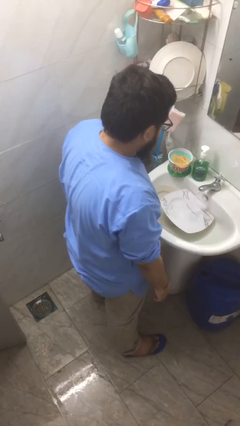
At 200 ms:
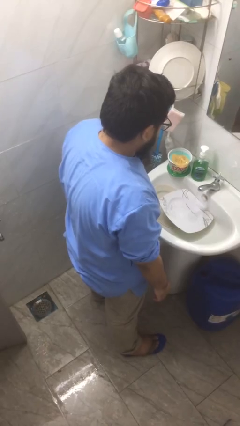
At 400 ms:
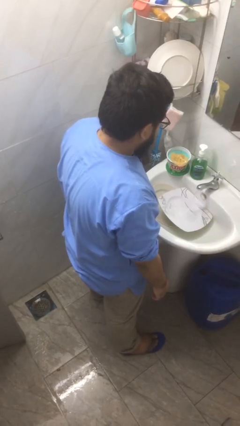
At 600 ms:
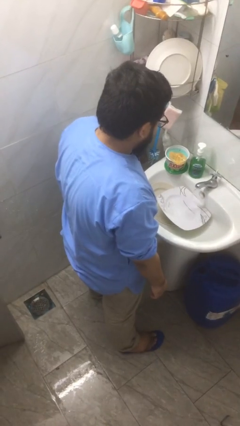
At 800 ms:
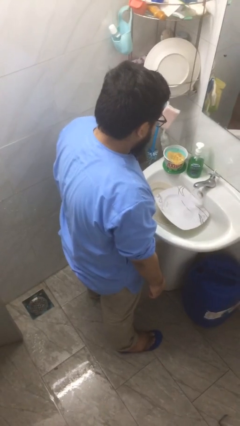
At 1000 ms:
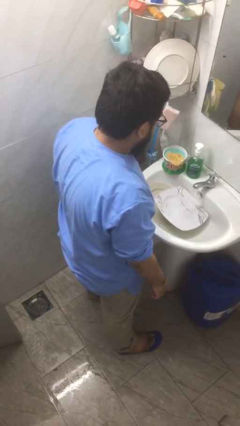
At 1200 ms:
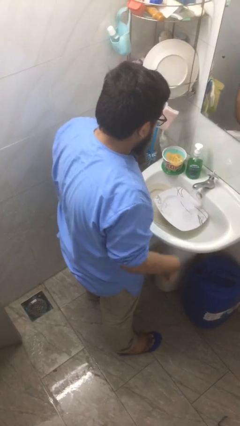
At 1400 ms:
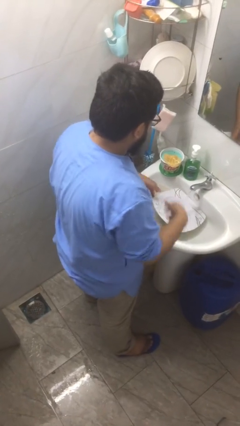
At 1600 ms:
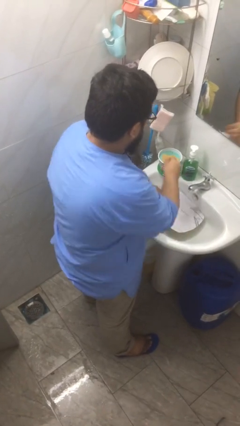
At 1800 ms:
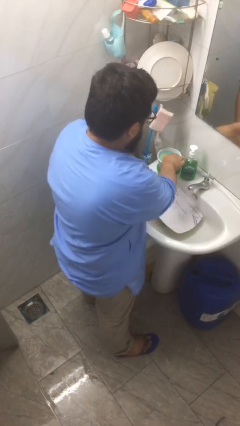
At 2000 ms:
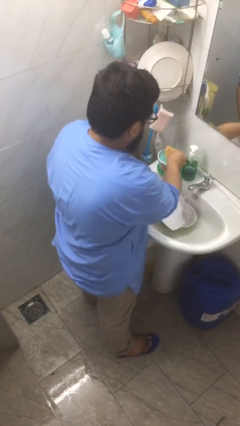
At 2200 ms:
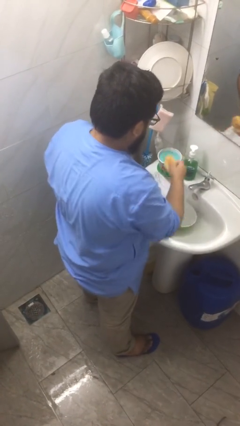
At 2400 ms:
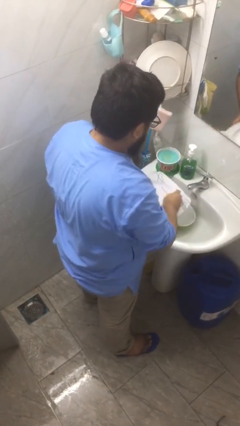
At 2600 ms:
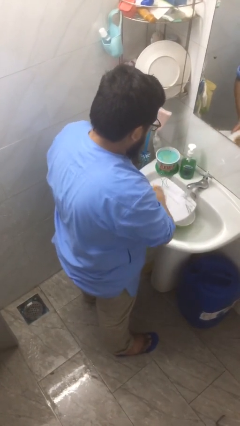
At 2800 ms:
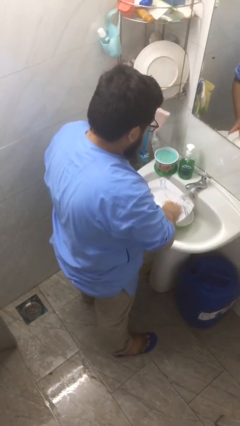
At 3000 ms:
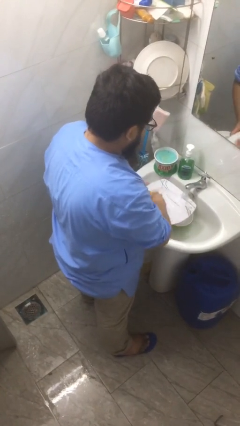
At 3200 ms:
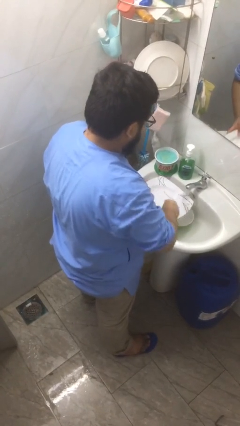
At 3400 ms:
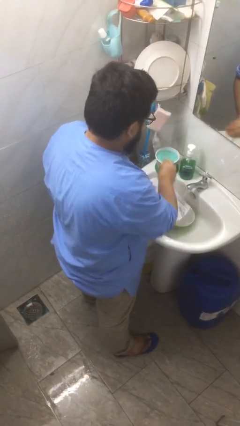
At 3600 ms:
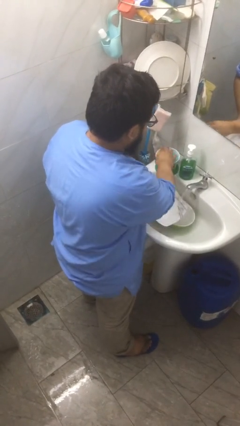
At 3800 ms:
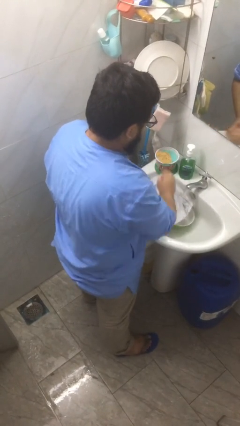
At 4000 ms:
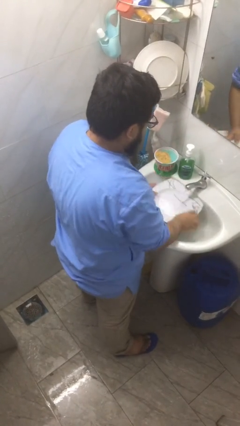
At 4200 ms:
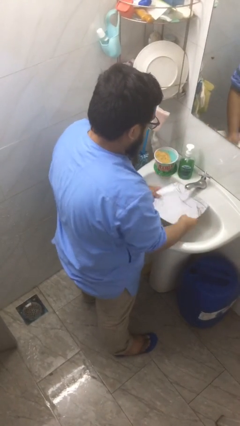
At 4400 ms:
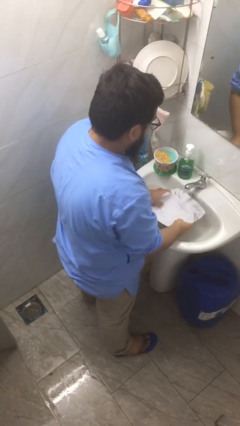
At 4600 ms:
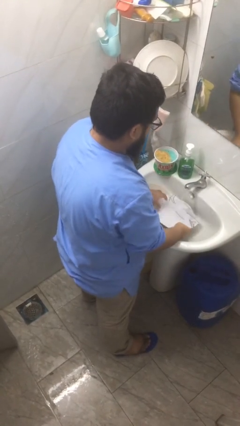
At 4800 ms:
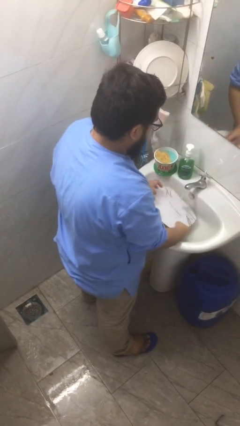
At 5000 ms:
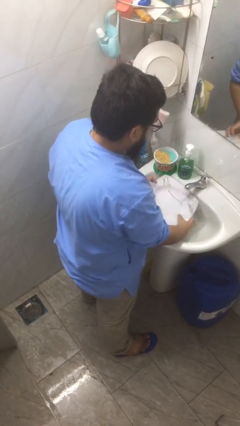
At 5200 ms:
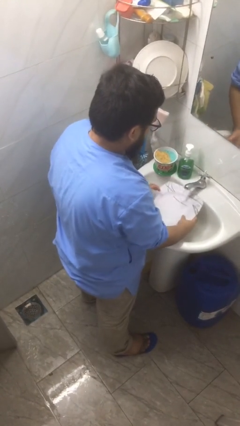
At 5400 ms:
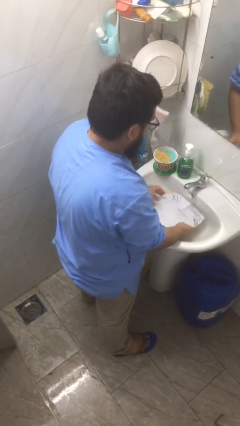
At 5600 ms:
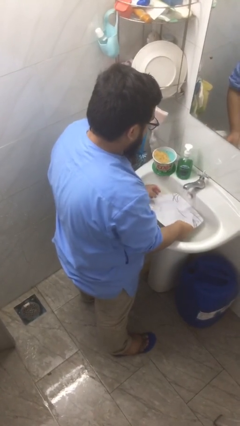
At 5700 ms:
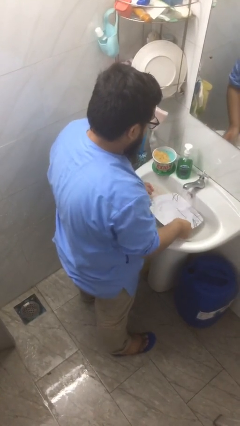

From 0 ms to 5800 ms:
person washes dish

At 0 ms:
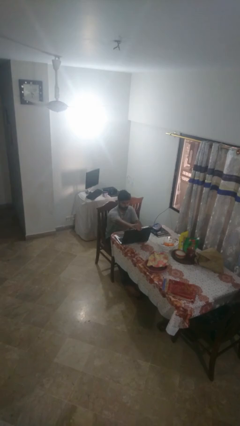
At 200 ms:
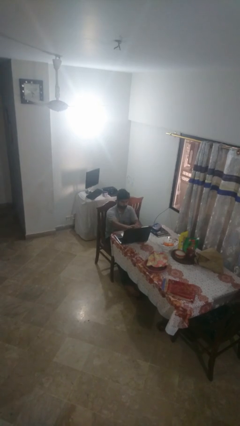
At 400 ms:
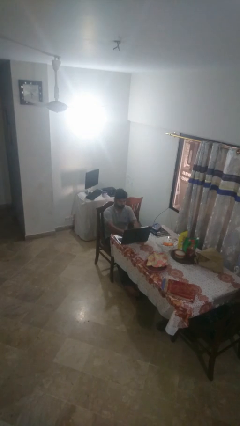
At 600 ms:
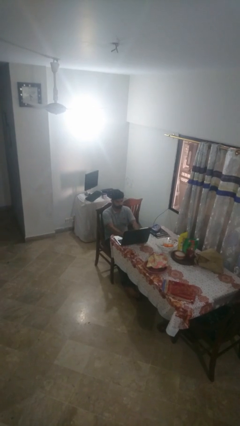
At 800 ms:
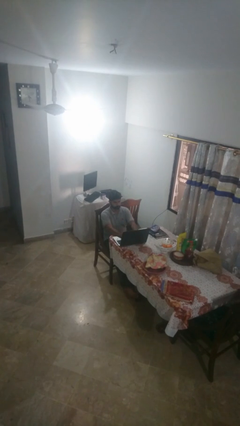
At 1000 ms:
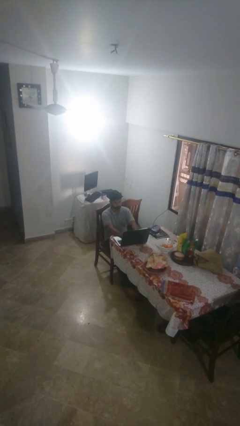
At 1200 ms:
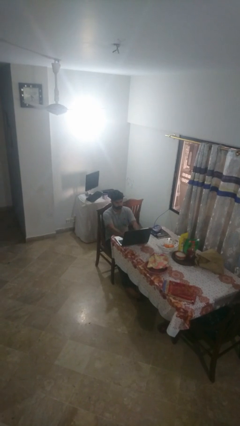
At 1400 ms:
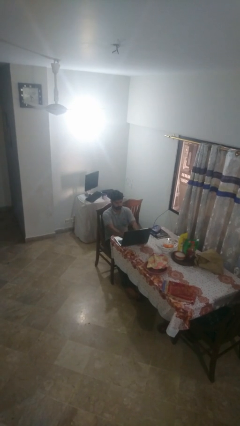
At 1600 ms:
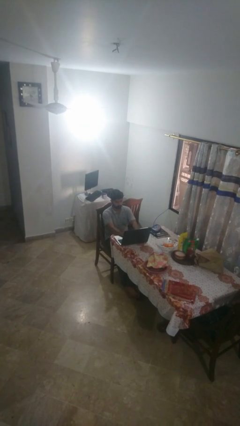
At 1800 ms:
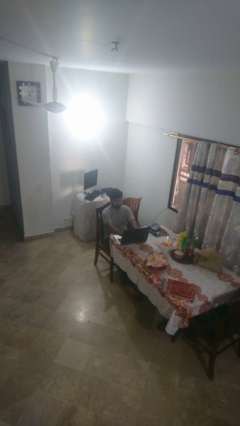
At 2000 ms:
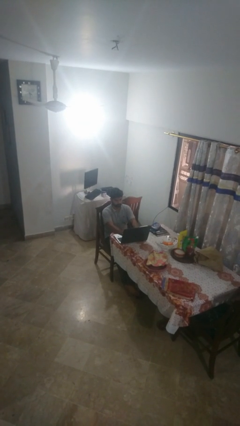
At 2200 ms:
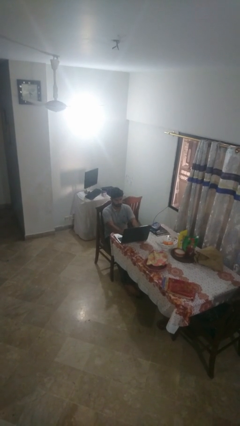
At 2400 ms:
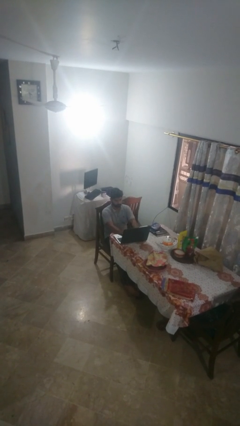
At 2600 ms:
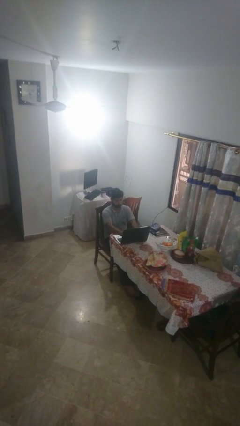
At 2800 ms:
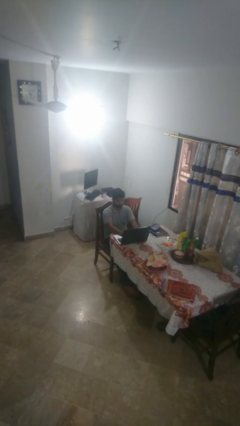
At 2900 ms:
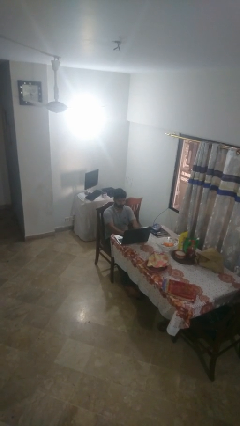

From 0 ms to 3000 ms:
person interacts with laptop

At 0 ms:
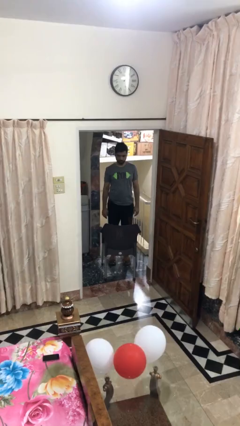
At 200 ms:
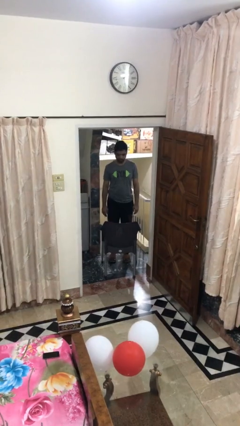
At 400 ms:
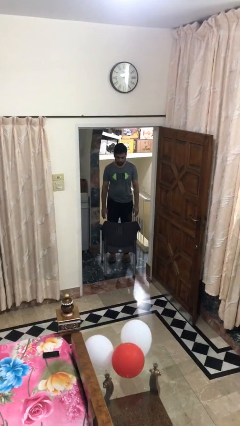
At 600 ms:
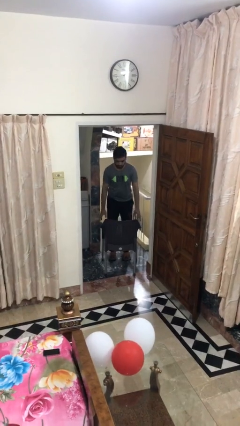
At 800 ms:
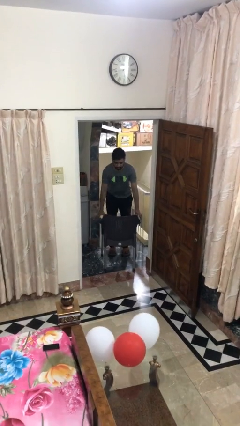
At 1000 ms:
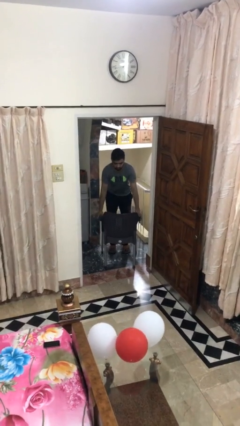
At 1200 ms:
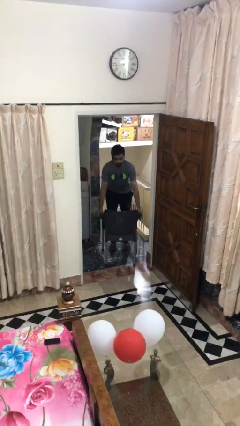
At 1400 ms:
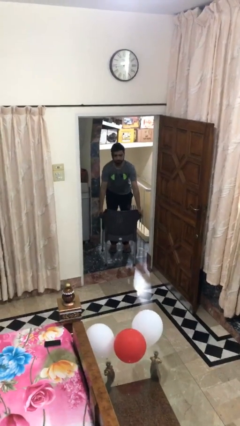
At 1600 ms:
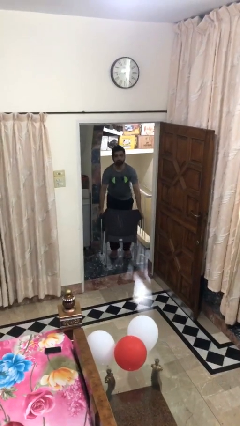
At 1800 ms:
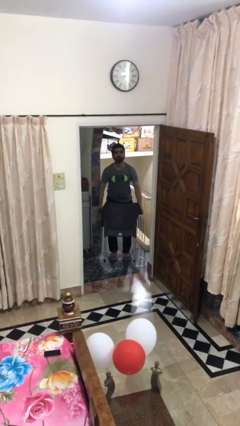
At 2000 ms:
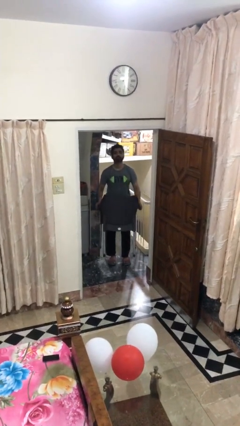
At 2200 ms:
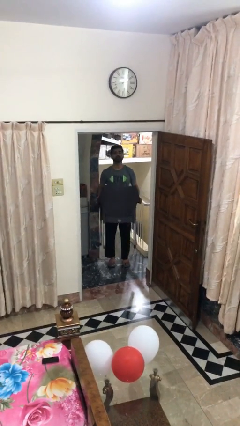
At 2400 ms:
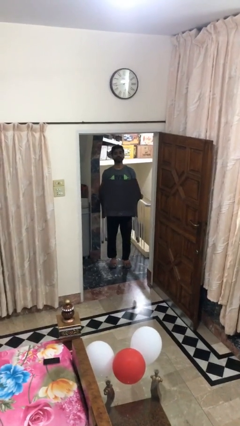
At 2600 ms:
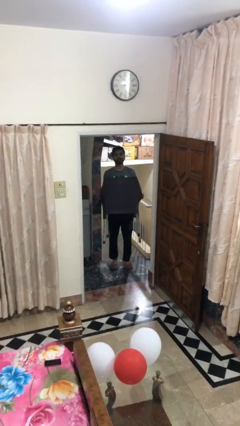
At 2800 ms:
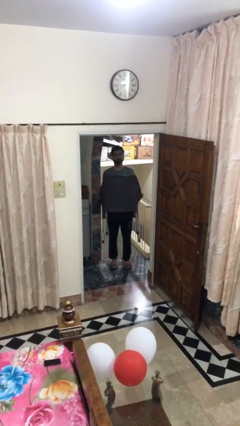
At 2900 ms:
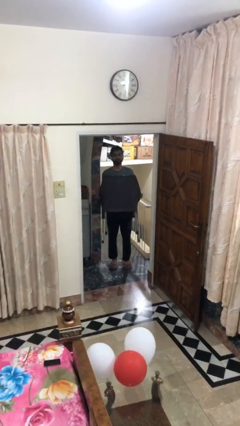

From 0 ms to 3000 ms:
person picks up object from floor

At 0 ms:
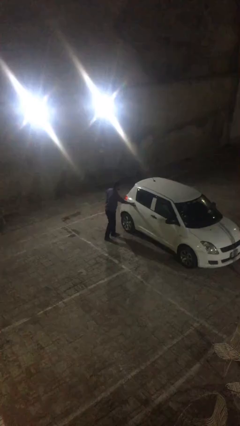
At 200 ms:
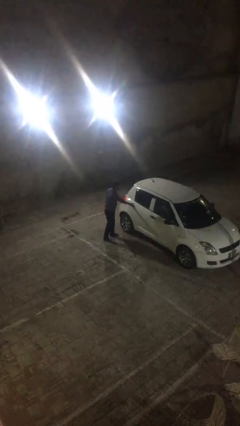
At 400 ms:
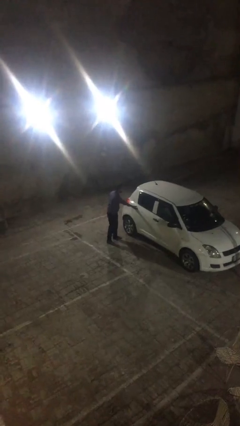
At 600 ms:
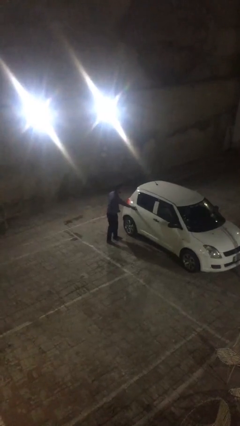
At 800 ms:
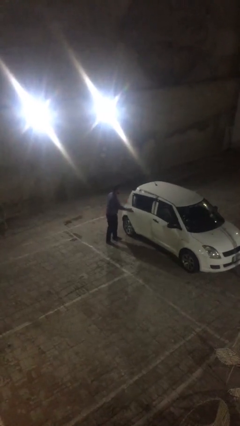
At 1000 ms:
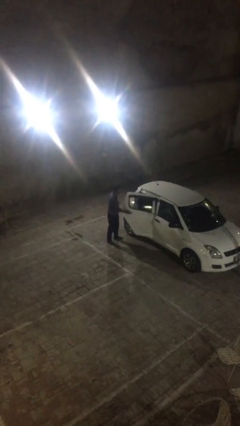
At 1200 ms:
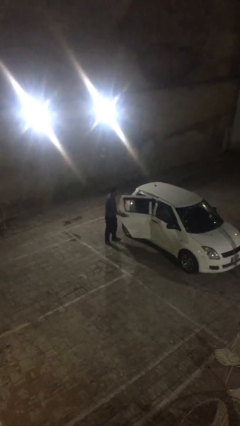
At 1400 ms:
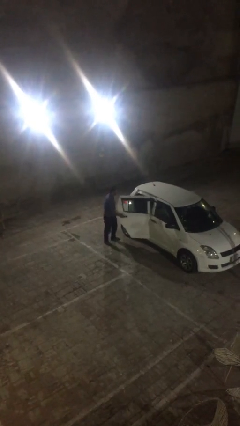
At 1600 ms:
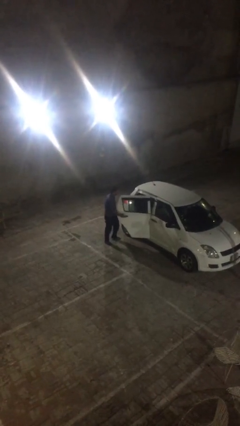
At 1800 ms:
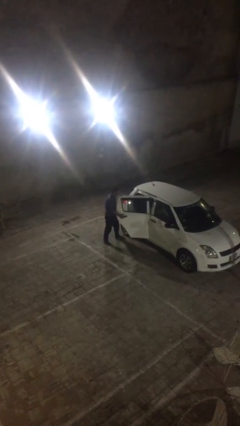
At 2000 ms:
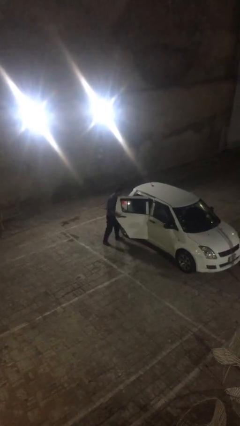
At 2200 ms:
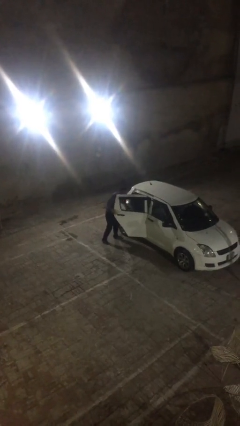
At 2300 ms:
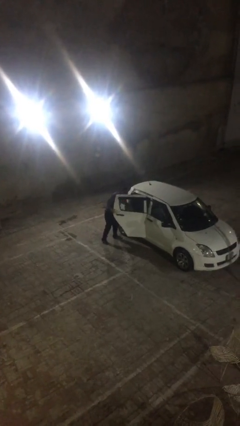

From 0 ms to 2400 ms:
person opens car door

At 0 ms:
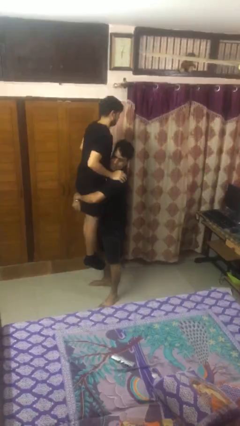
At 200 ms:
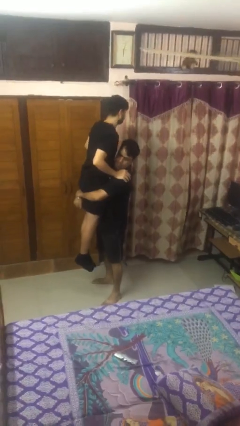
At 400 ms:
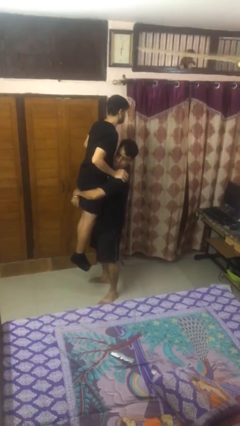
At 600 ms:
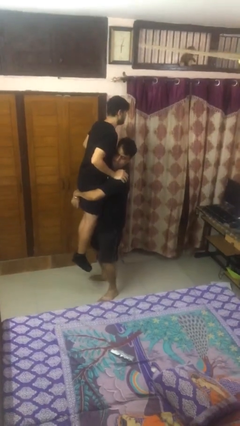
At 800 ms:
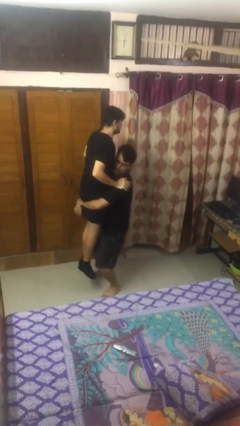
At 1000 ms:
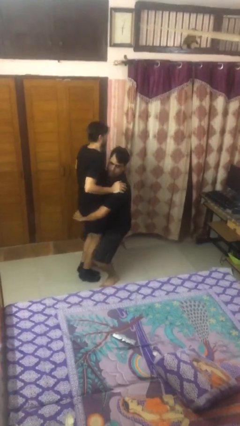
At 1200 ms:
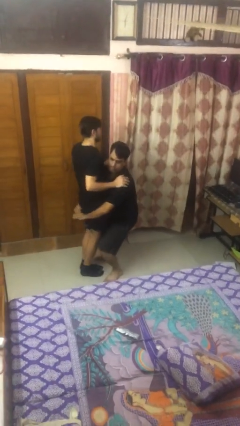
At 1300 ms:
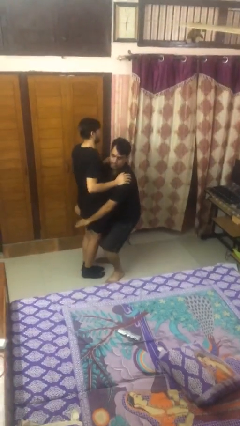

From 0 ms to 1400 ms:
person puts down person

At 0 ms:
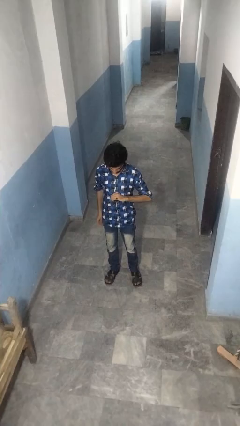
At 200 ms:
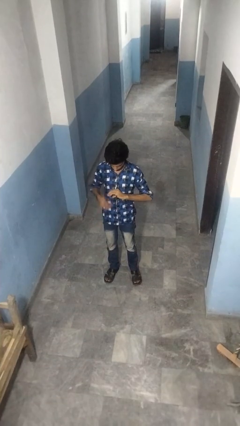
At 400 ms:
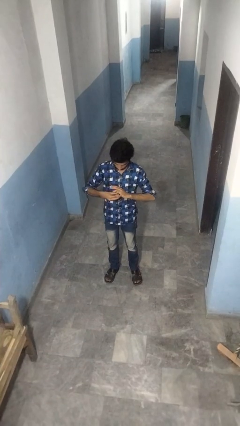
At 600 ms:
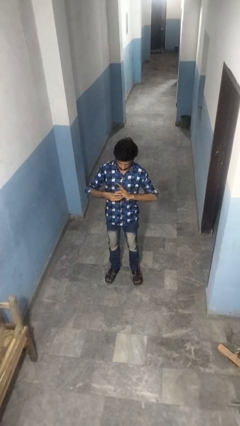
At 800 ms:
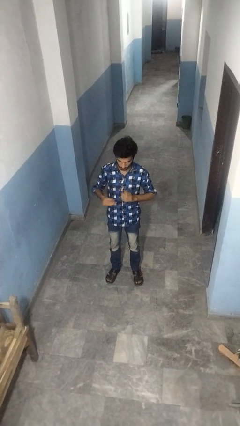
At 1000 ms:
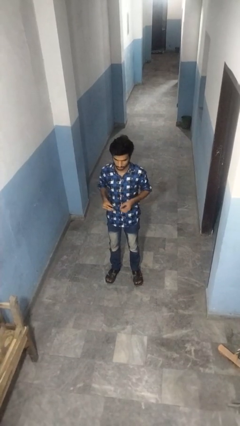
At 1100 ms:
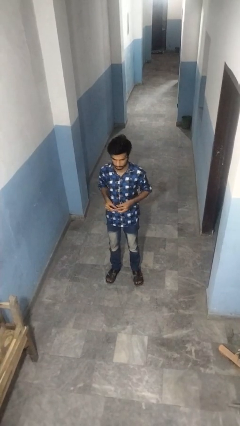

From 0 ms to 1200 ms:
person takes off ring

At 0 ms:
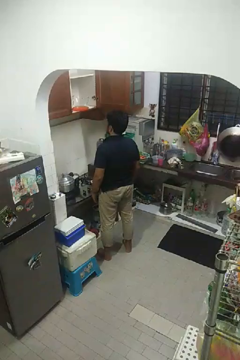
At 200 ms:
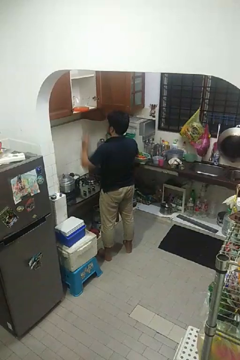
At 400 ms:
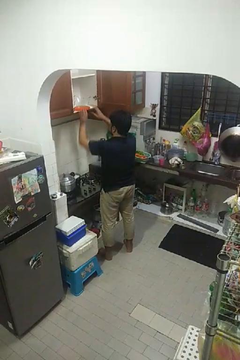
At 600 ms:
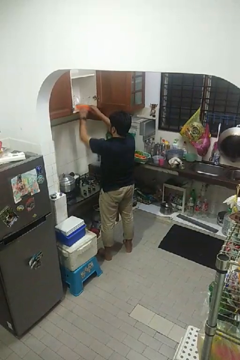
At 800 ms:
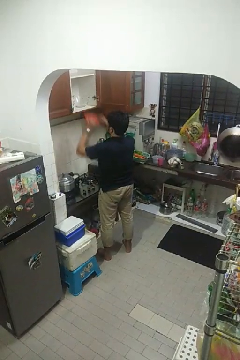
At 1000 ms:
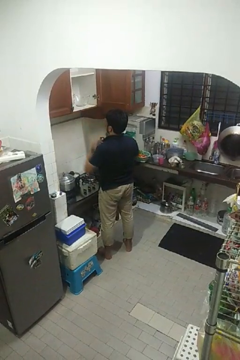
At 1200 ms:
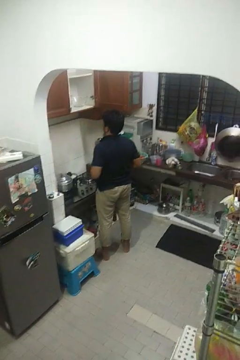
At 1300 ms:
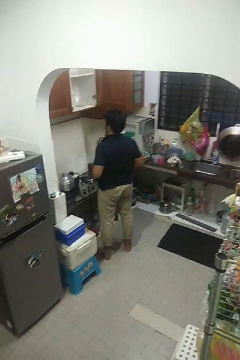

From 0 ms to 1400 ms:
person takes object from cabinet
